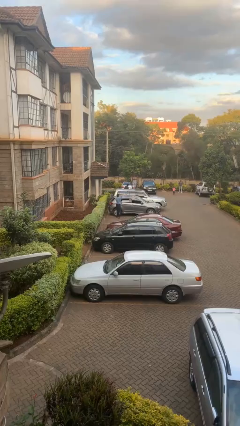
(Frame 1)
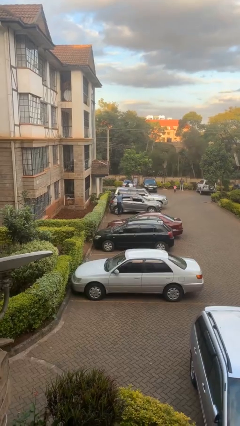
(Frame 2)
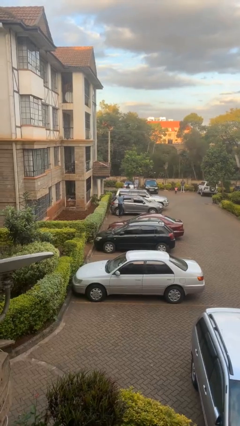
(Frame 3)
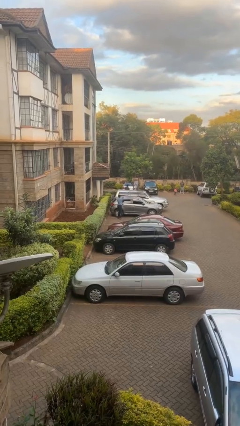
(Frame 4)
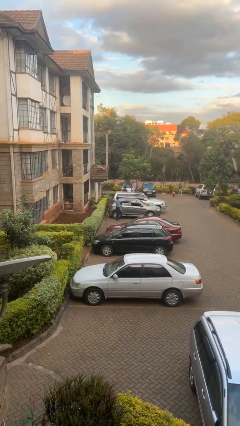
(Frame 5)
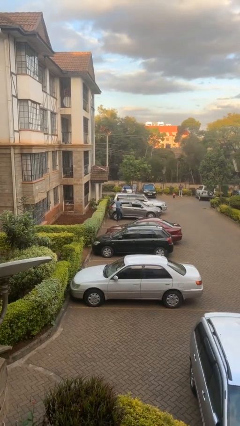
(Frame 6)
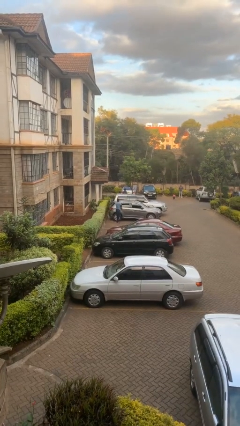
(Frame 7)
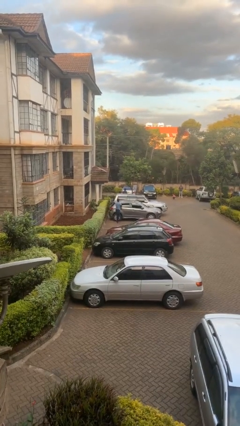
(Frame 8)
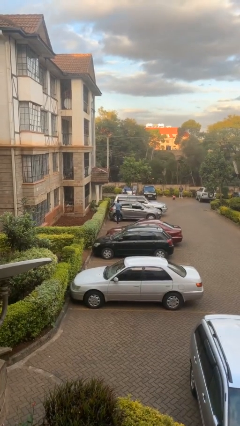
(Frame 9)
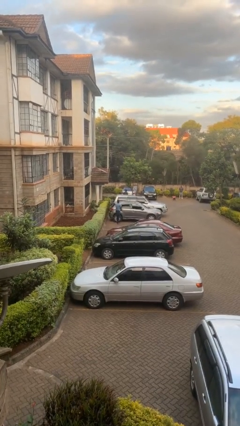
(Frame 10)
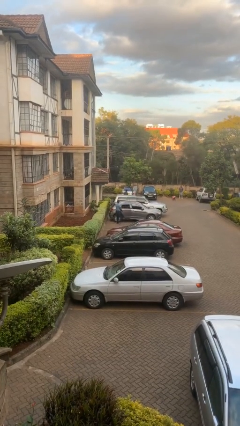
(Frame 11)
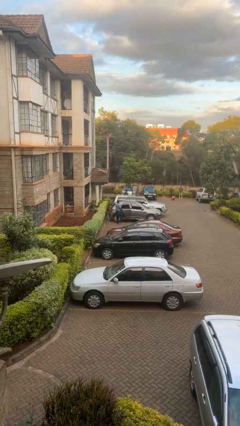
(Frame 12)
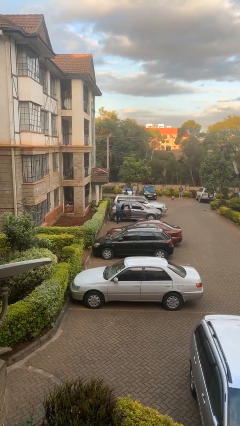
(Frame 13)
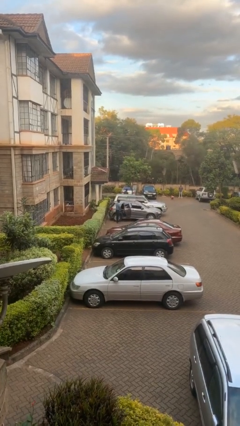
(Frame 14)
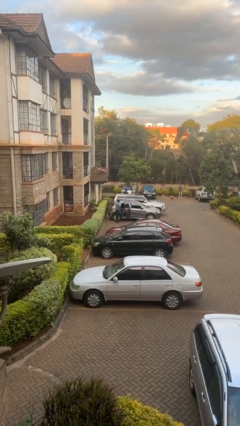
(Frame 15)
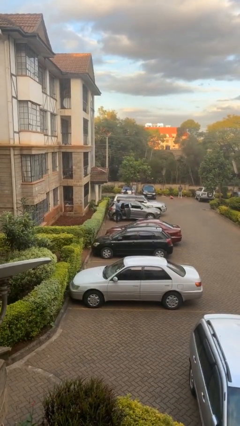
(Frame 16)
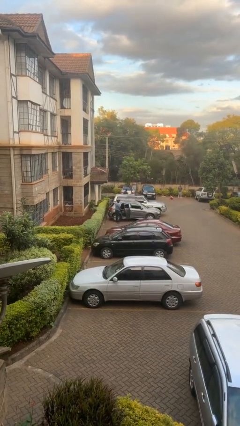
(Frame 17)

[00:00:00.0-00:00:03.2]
person opens car door

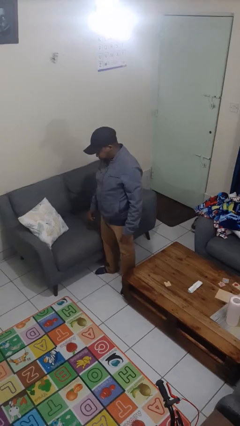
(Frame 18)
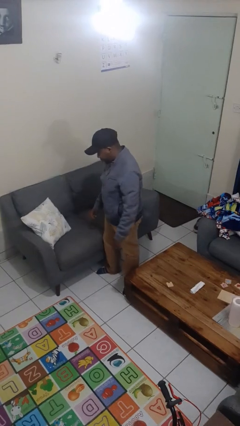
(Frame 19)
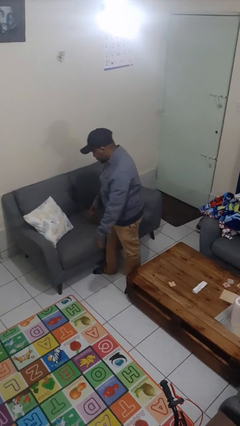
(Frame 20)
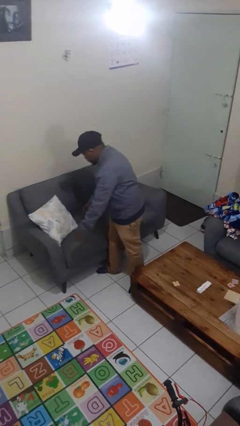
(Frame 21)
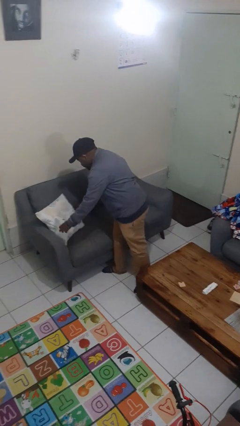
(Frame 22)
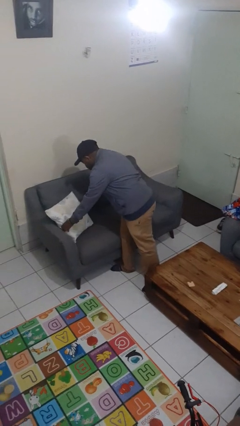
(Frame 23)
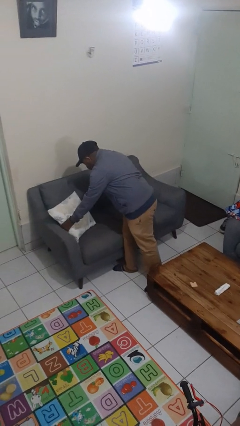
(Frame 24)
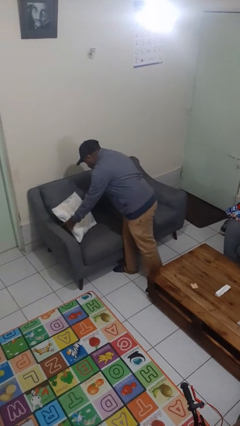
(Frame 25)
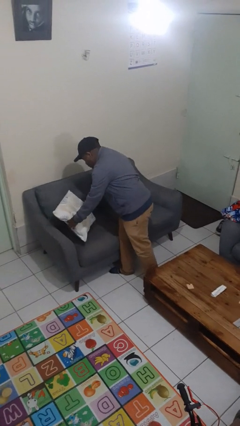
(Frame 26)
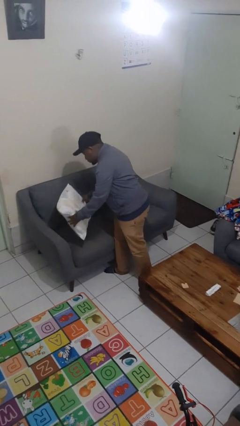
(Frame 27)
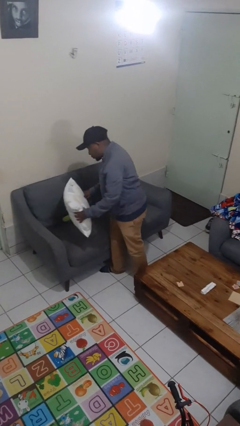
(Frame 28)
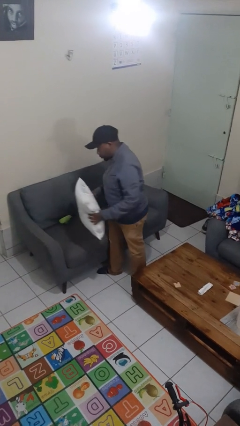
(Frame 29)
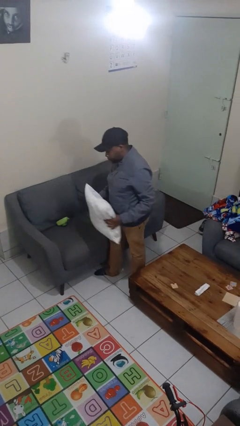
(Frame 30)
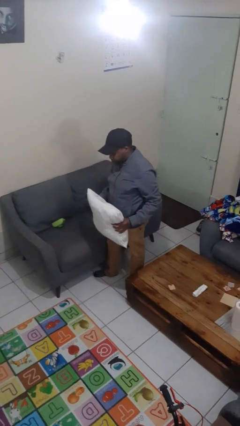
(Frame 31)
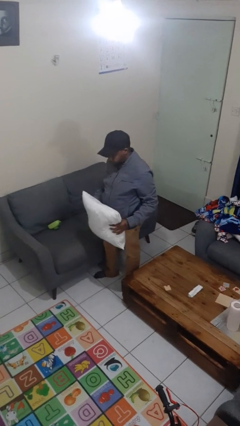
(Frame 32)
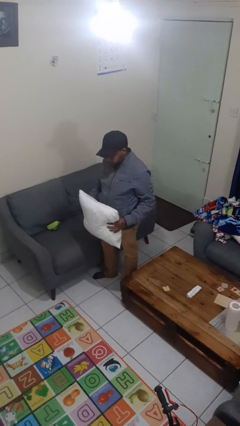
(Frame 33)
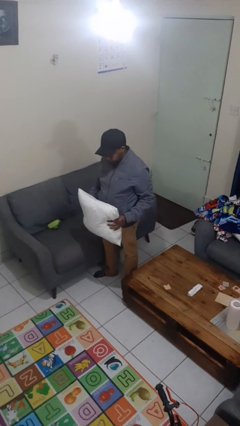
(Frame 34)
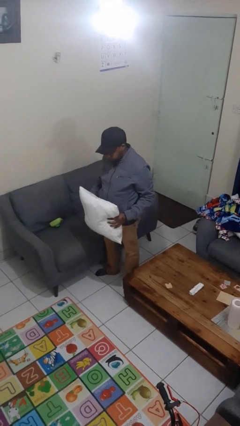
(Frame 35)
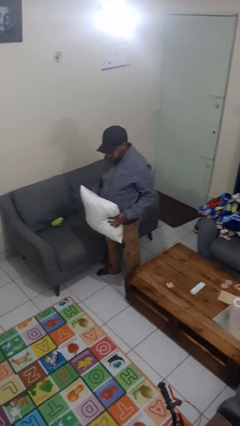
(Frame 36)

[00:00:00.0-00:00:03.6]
person picks up object from couch

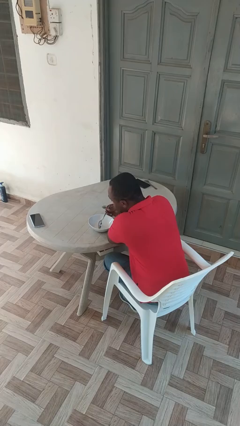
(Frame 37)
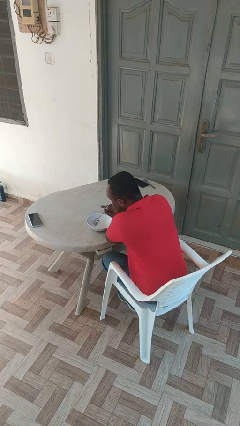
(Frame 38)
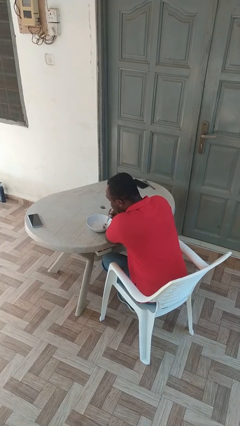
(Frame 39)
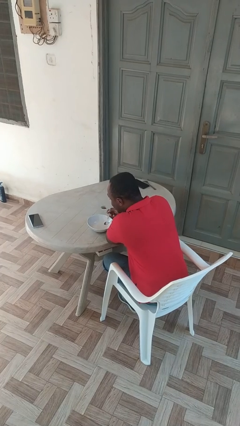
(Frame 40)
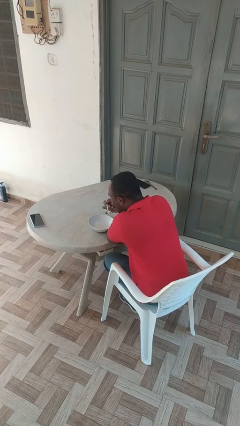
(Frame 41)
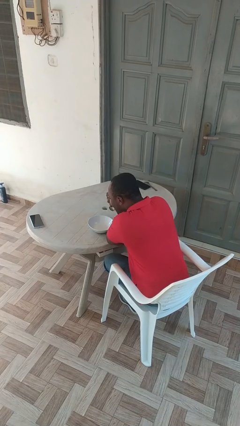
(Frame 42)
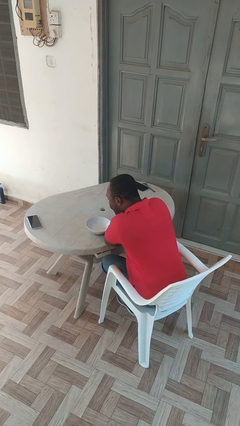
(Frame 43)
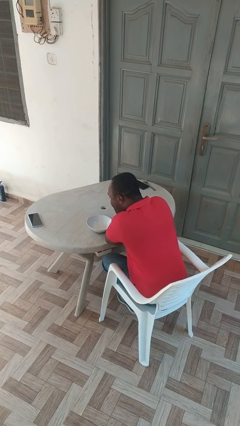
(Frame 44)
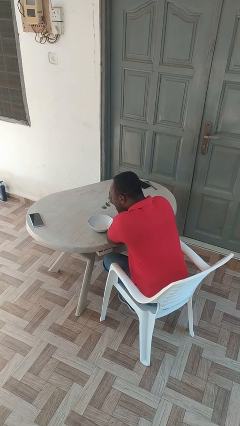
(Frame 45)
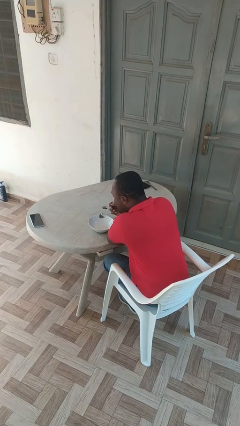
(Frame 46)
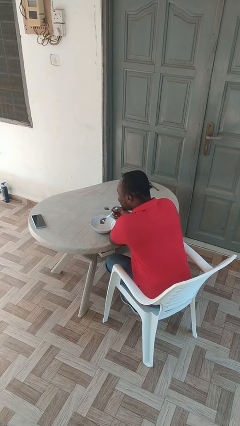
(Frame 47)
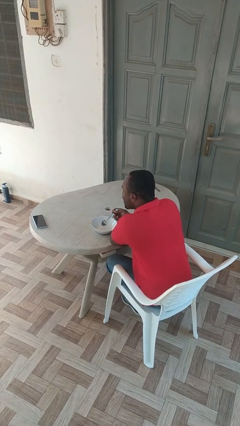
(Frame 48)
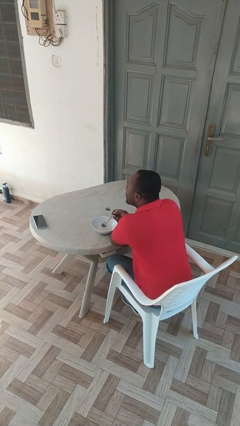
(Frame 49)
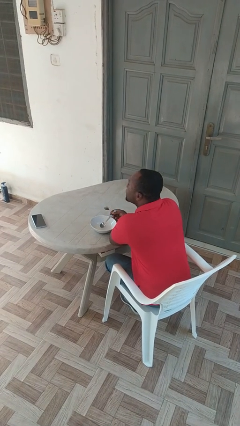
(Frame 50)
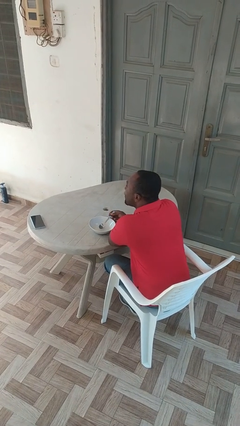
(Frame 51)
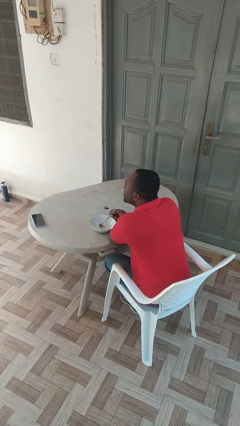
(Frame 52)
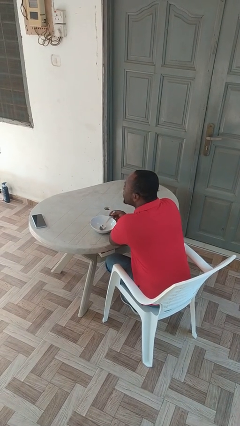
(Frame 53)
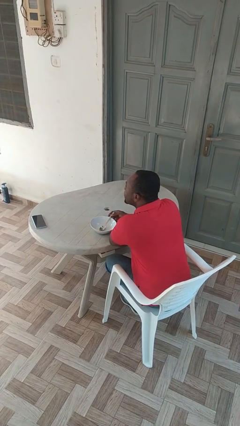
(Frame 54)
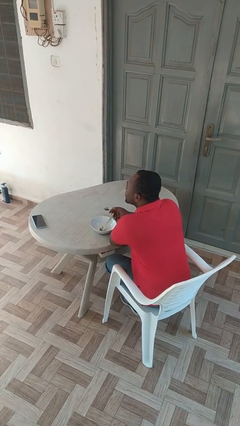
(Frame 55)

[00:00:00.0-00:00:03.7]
person eats with utensil

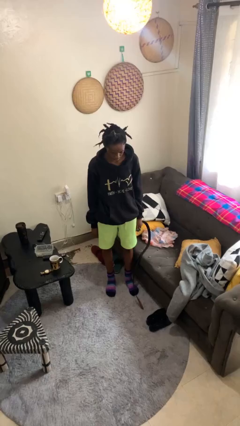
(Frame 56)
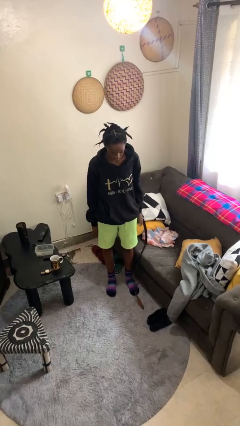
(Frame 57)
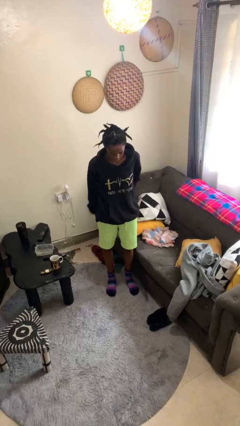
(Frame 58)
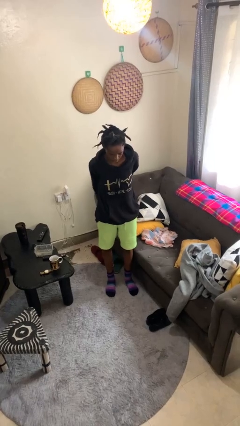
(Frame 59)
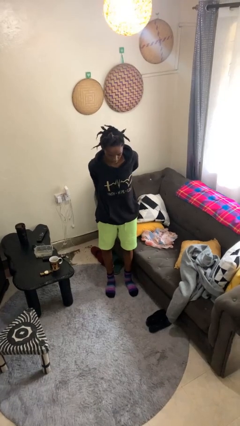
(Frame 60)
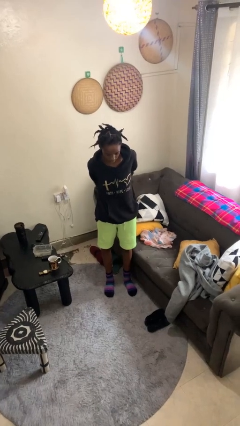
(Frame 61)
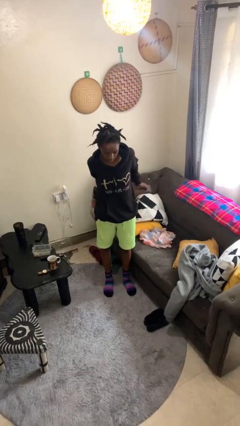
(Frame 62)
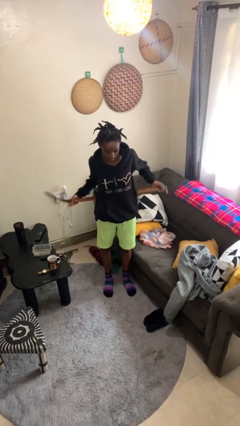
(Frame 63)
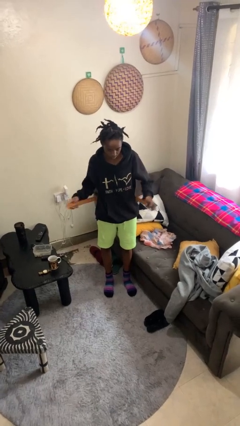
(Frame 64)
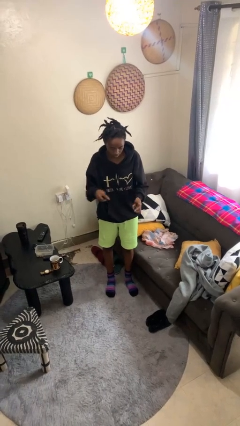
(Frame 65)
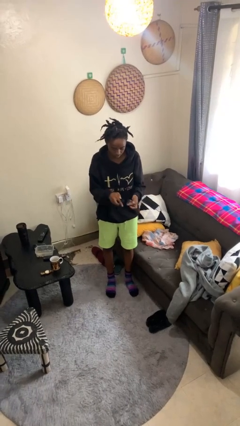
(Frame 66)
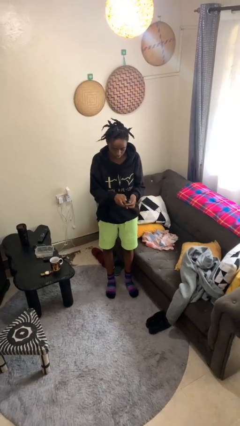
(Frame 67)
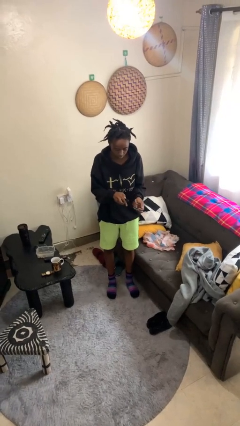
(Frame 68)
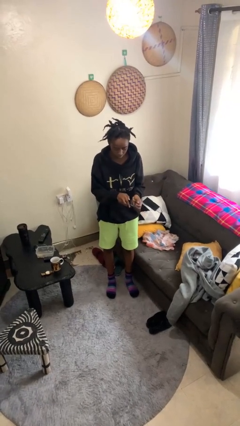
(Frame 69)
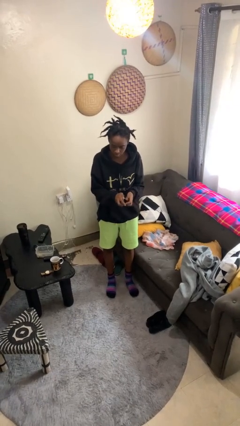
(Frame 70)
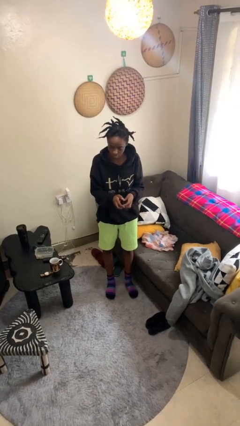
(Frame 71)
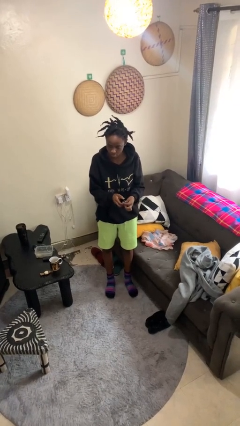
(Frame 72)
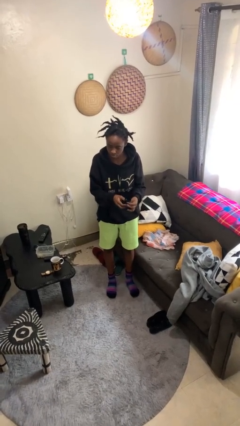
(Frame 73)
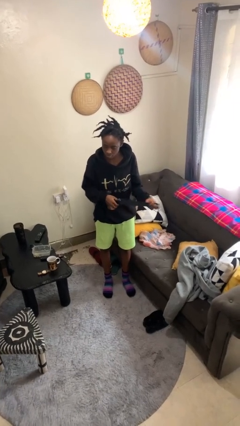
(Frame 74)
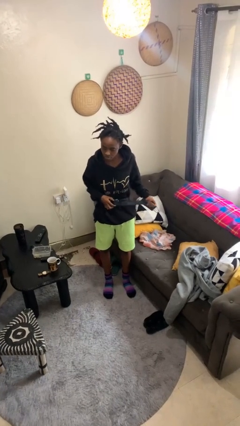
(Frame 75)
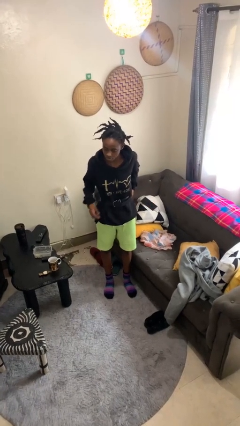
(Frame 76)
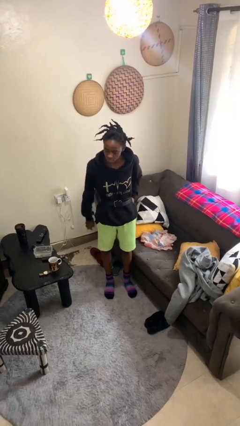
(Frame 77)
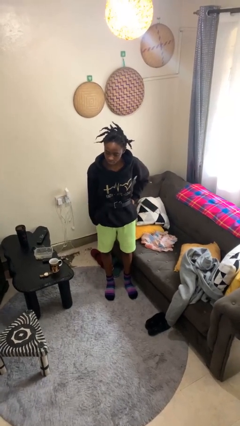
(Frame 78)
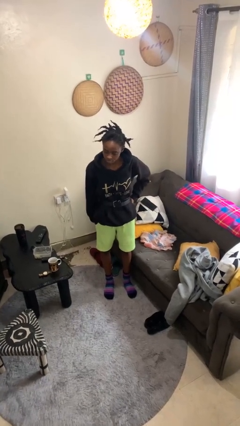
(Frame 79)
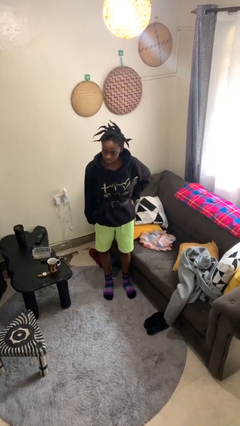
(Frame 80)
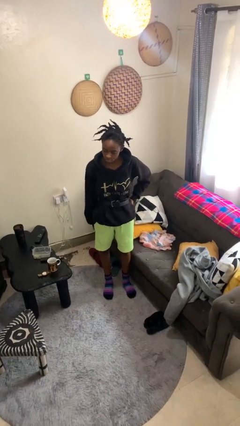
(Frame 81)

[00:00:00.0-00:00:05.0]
person puts on belt

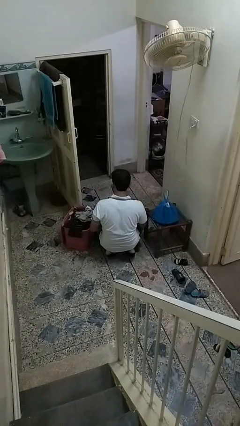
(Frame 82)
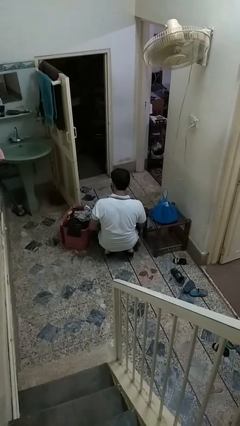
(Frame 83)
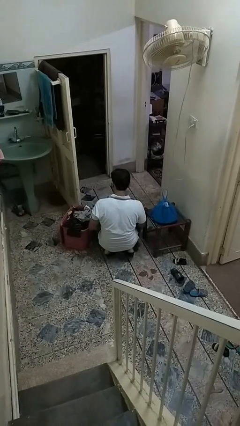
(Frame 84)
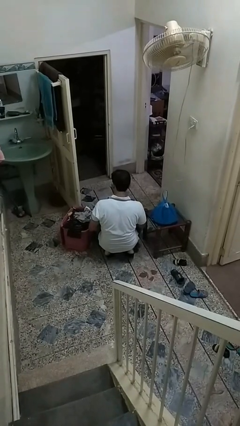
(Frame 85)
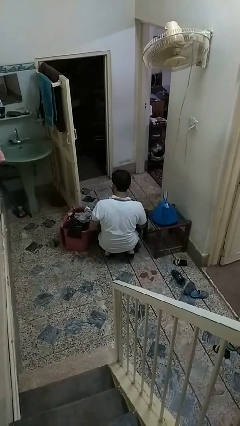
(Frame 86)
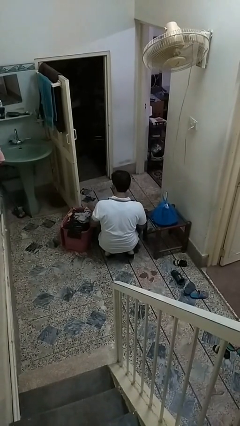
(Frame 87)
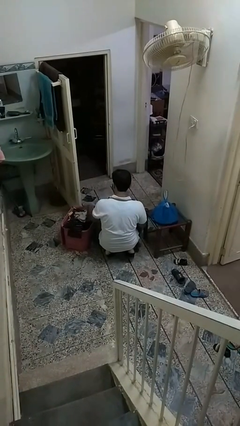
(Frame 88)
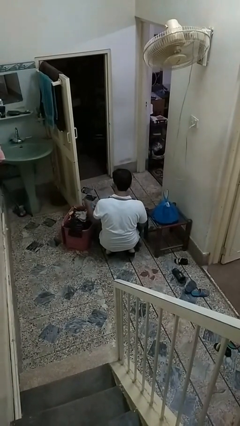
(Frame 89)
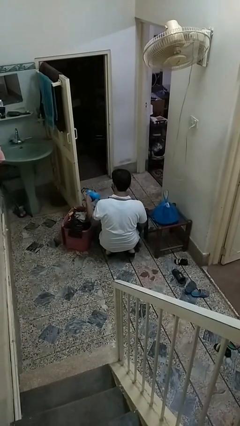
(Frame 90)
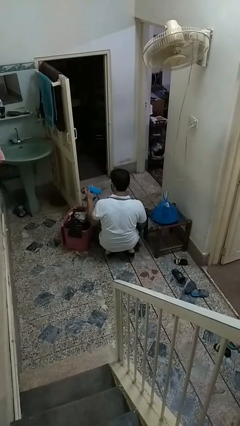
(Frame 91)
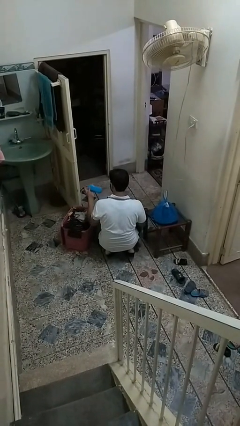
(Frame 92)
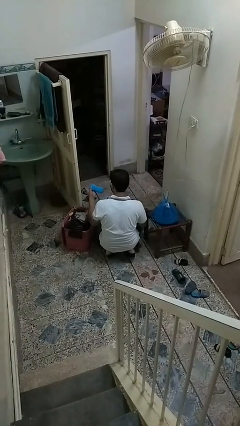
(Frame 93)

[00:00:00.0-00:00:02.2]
person takes object from basket
